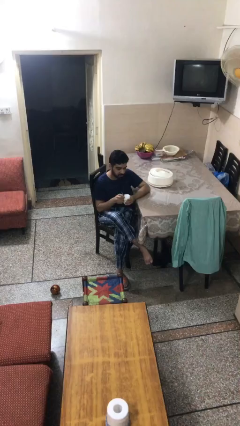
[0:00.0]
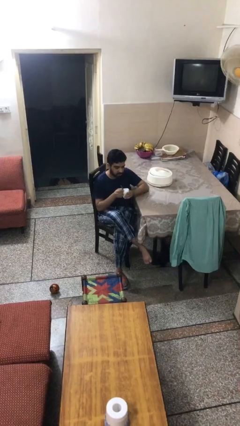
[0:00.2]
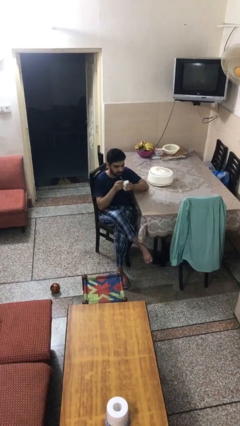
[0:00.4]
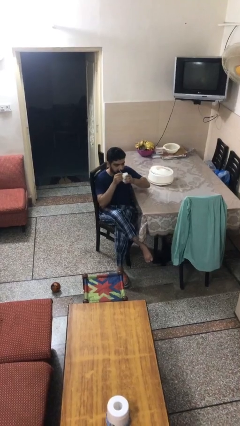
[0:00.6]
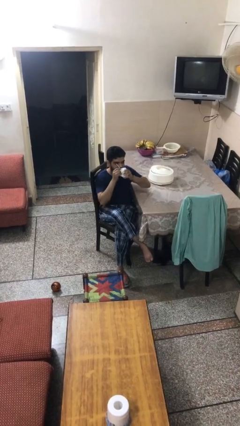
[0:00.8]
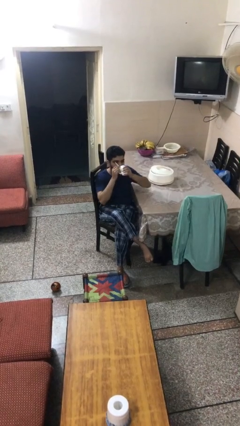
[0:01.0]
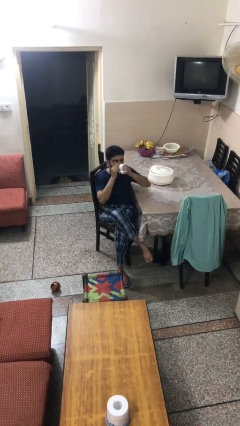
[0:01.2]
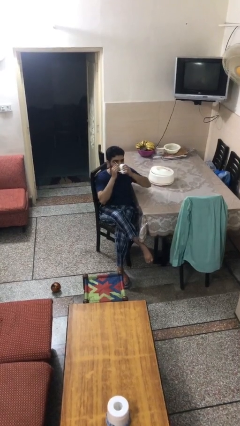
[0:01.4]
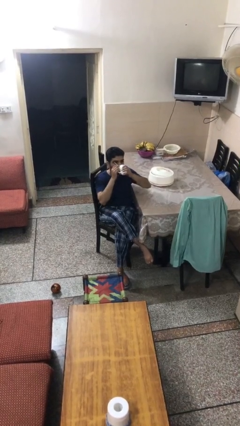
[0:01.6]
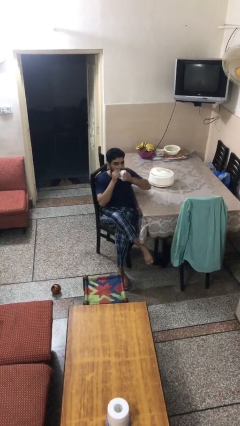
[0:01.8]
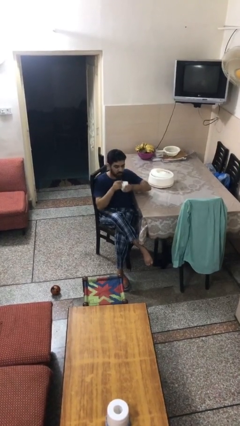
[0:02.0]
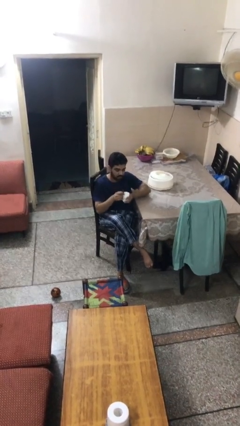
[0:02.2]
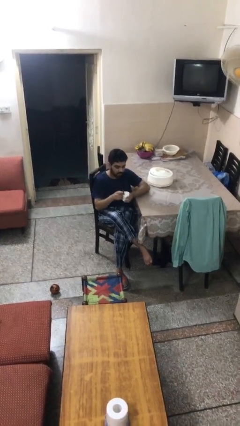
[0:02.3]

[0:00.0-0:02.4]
person drinks from mug

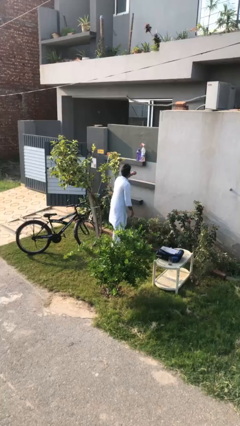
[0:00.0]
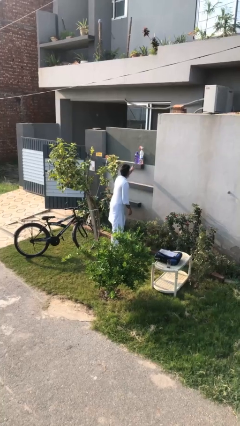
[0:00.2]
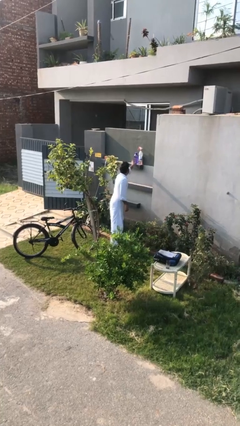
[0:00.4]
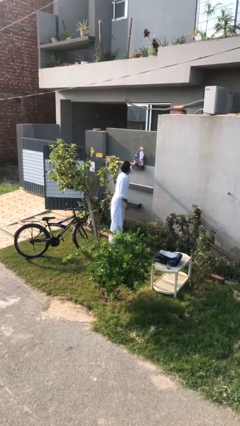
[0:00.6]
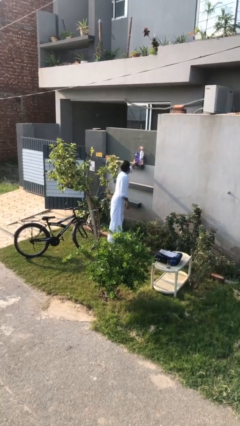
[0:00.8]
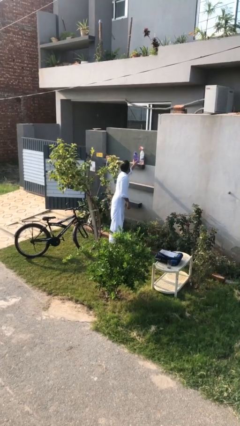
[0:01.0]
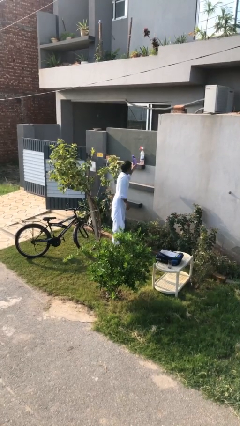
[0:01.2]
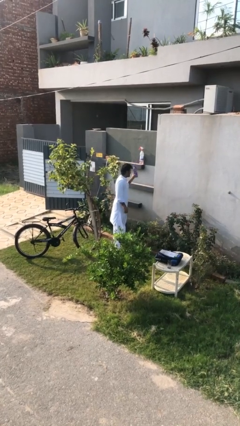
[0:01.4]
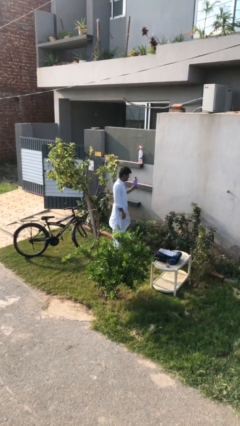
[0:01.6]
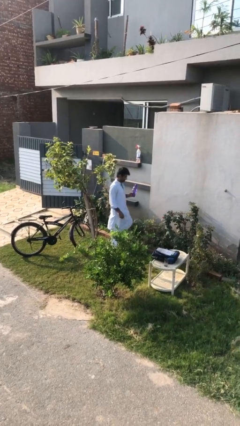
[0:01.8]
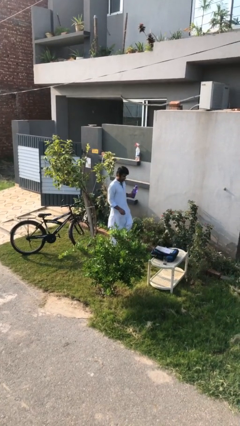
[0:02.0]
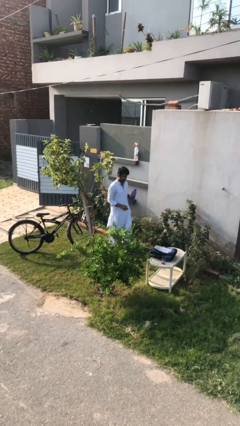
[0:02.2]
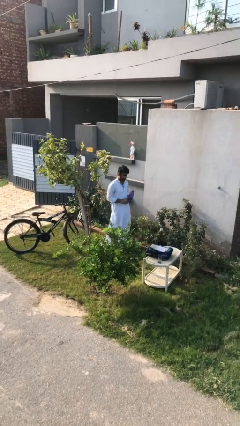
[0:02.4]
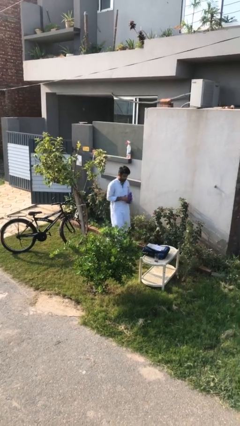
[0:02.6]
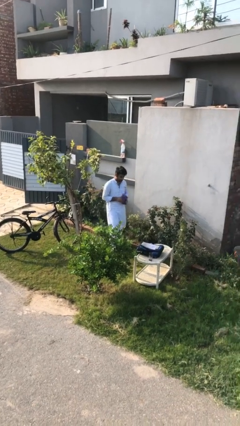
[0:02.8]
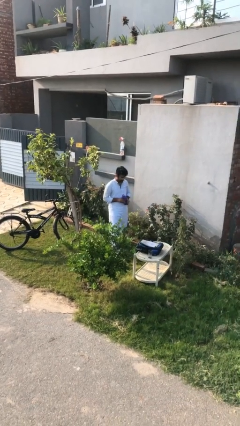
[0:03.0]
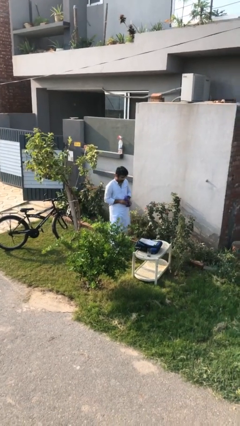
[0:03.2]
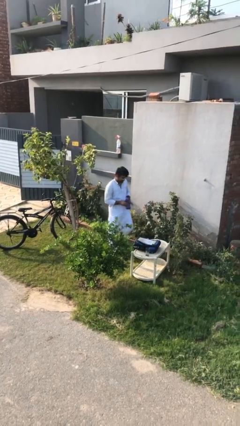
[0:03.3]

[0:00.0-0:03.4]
person picks up object from shelf

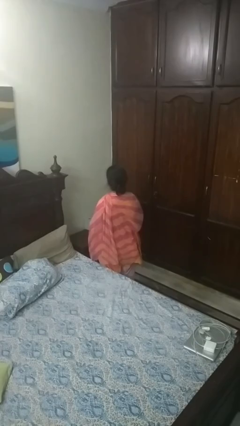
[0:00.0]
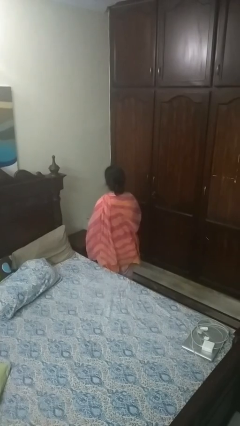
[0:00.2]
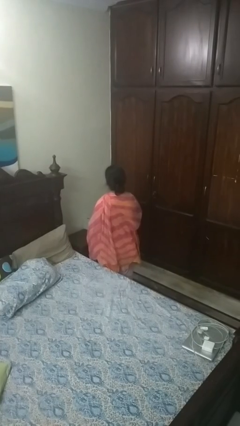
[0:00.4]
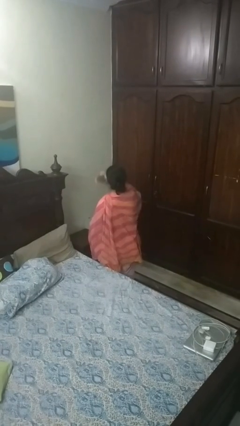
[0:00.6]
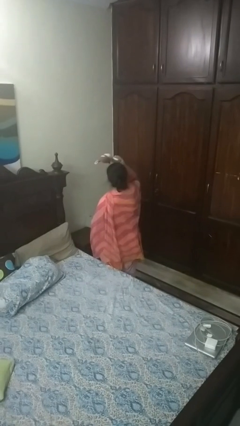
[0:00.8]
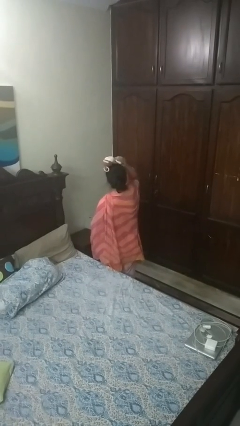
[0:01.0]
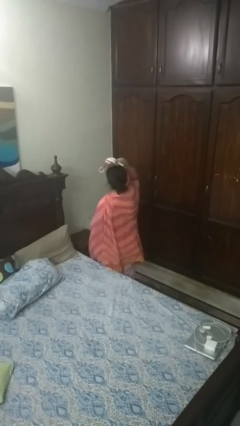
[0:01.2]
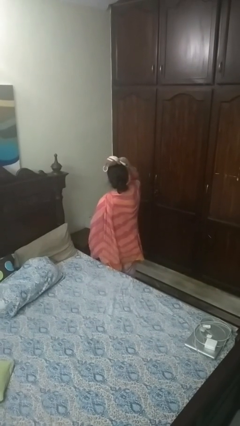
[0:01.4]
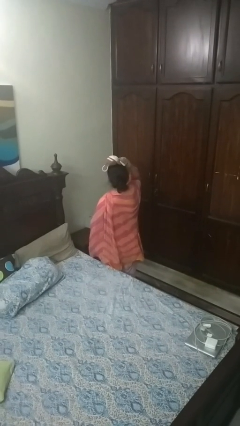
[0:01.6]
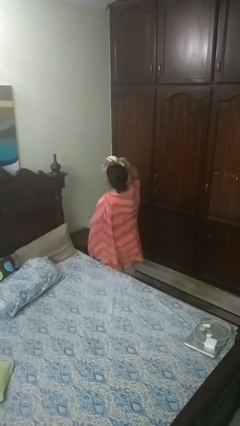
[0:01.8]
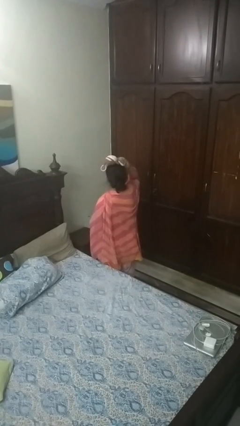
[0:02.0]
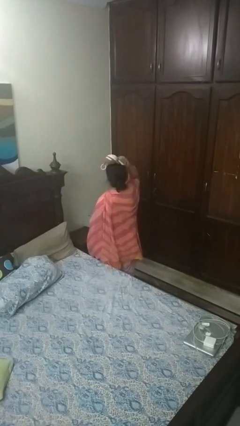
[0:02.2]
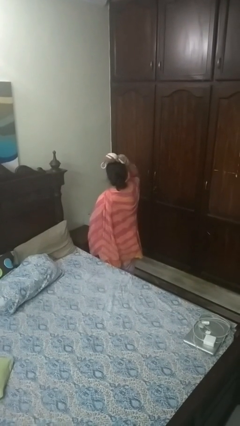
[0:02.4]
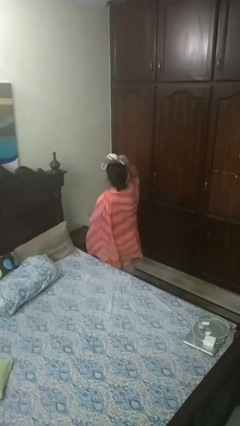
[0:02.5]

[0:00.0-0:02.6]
person holds object above head

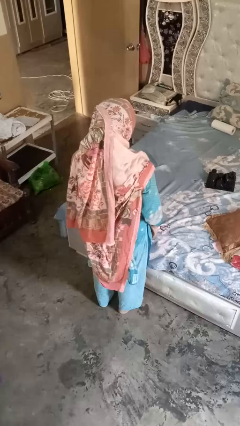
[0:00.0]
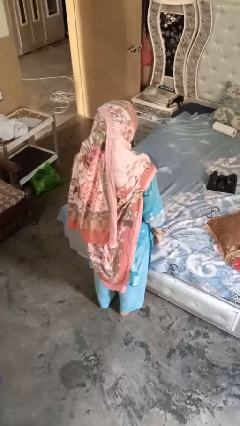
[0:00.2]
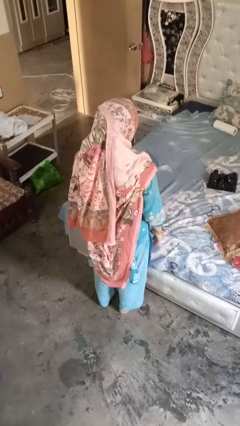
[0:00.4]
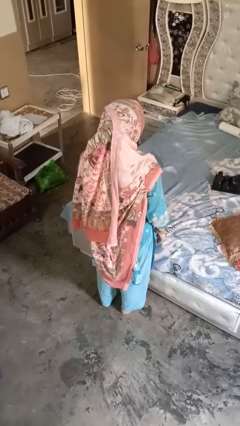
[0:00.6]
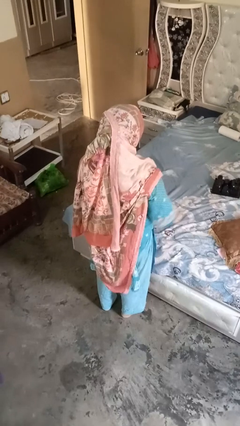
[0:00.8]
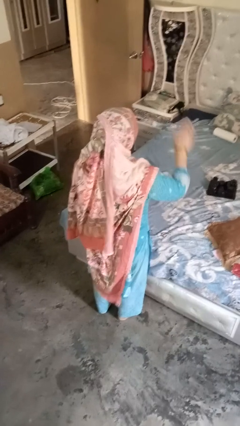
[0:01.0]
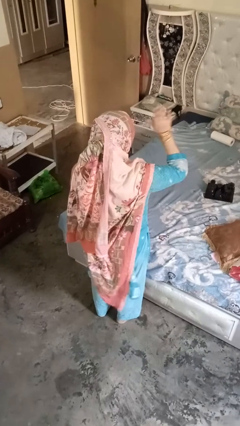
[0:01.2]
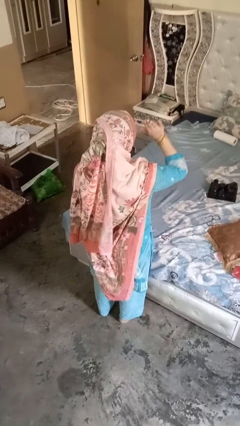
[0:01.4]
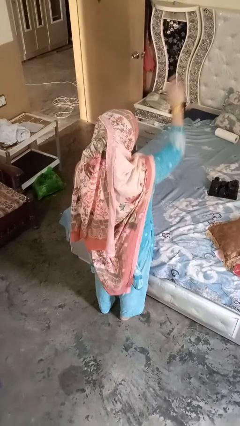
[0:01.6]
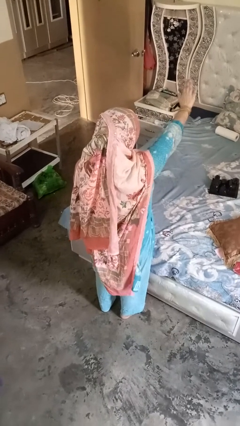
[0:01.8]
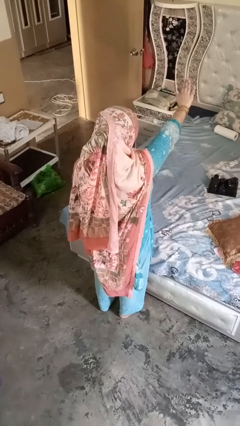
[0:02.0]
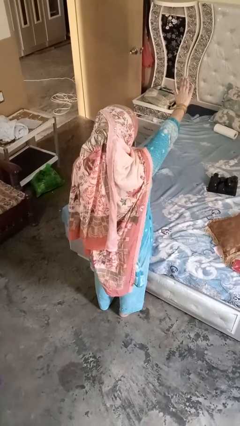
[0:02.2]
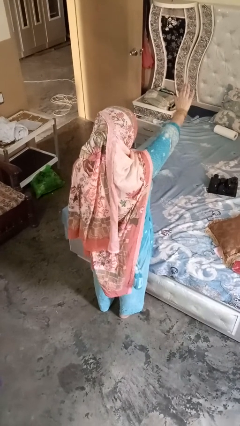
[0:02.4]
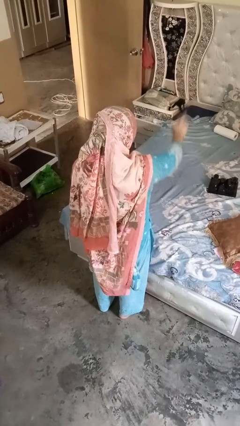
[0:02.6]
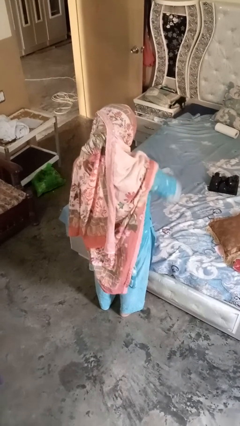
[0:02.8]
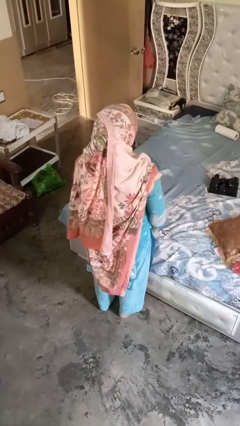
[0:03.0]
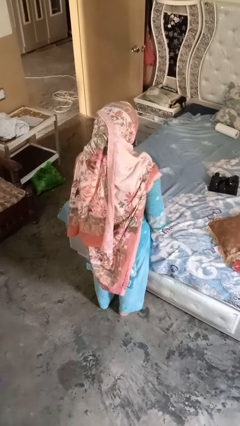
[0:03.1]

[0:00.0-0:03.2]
person gestures stop

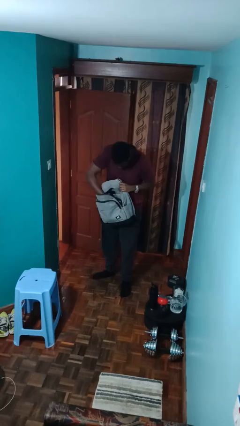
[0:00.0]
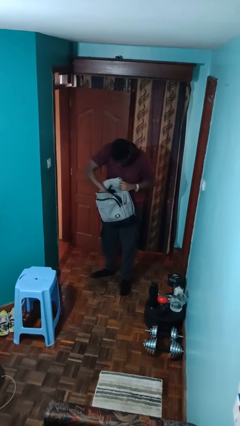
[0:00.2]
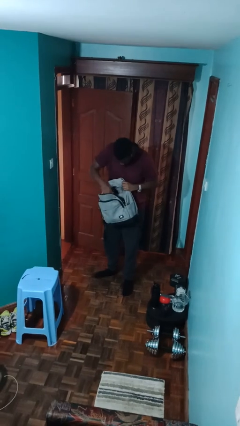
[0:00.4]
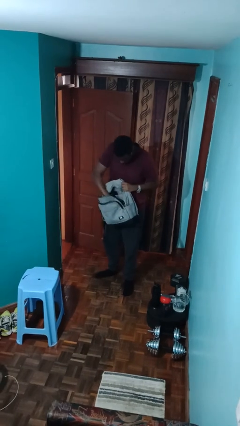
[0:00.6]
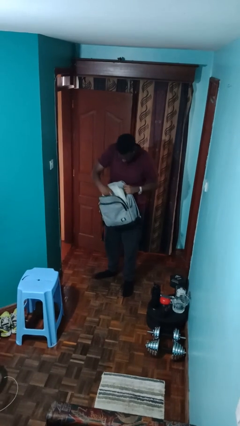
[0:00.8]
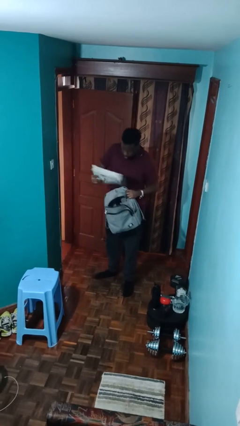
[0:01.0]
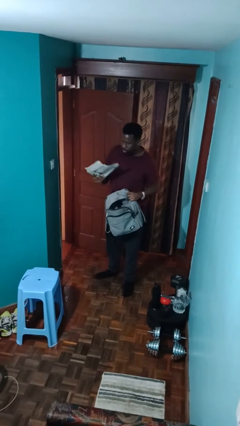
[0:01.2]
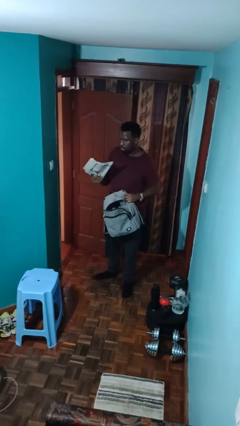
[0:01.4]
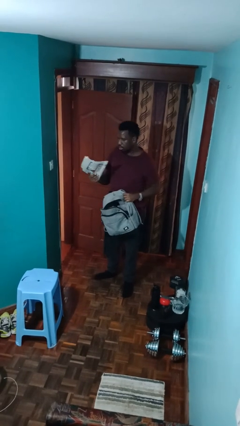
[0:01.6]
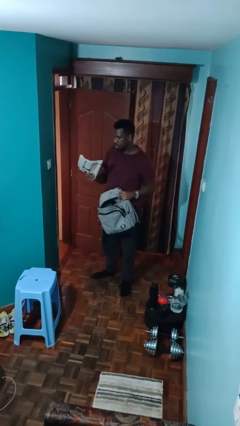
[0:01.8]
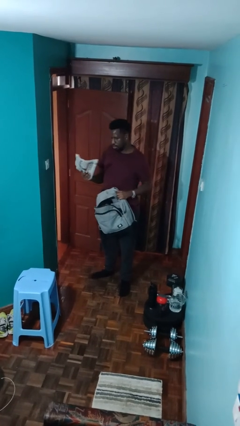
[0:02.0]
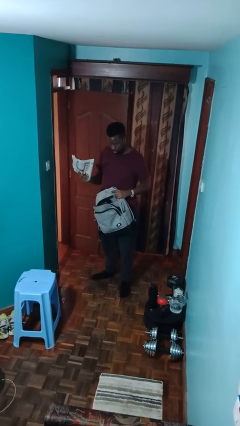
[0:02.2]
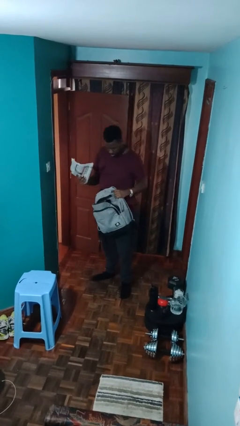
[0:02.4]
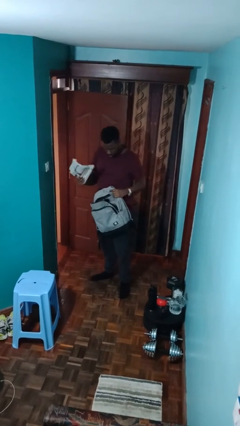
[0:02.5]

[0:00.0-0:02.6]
person takes object from backpack

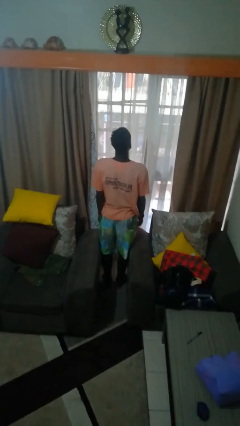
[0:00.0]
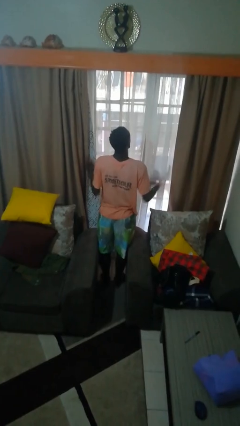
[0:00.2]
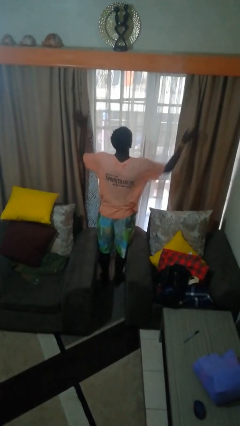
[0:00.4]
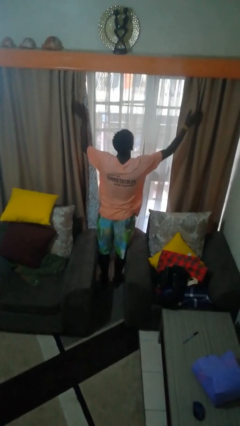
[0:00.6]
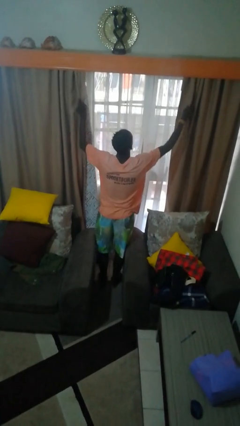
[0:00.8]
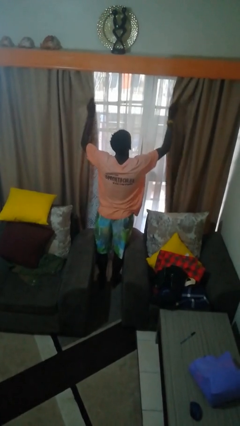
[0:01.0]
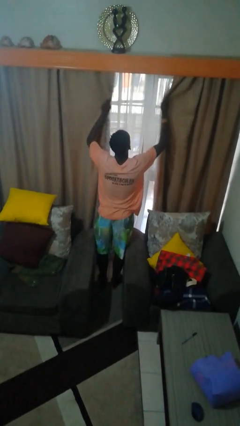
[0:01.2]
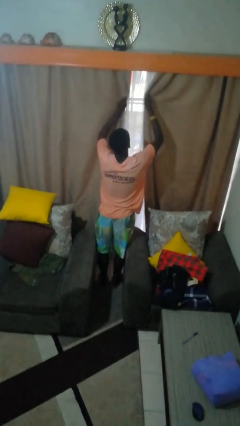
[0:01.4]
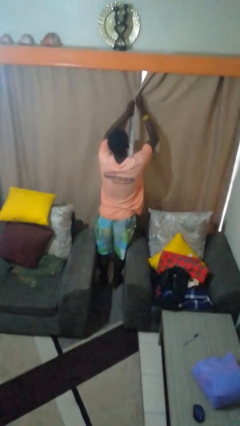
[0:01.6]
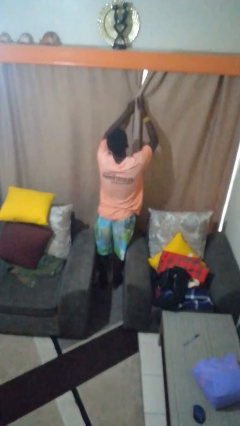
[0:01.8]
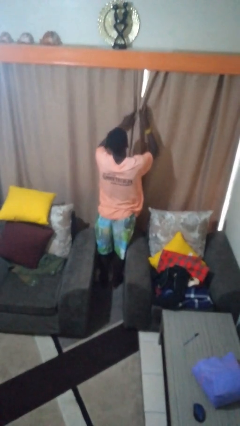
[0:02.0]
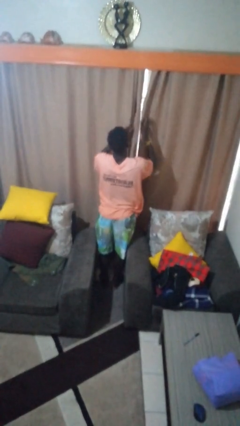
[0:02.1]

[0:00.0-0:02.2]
person closes curtains

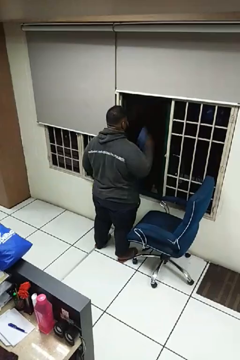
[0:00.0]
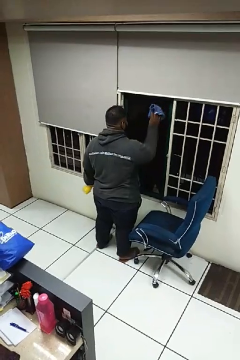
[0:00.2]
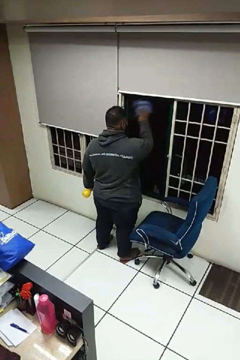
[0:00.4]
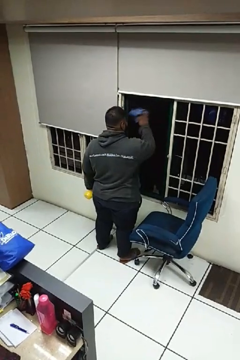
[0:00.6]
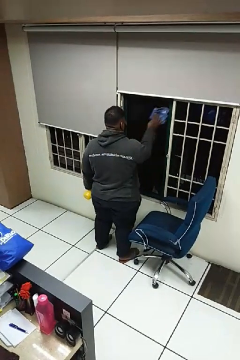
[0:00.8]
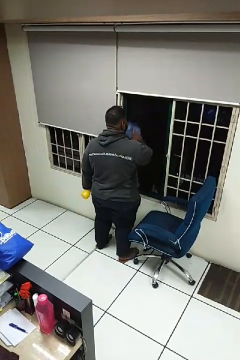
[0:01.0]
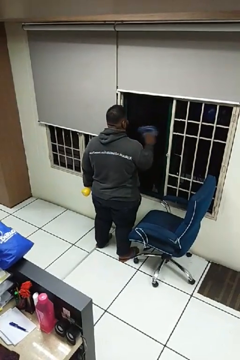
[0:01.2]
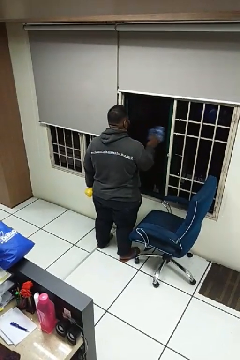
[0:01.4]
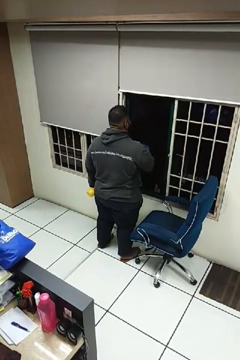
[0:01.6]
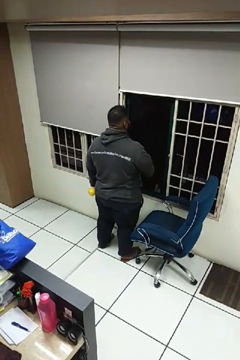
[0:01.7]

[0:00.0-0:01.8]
person washes window
